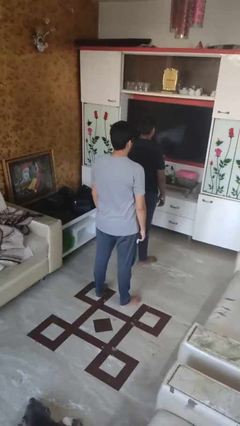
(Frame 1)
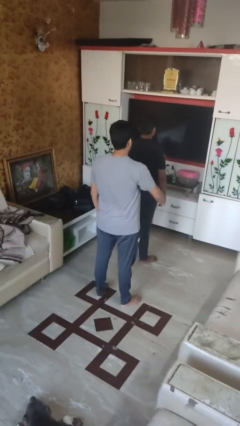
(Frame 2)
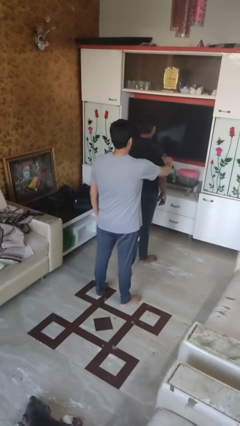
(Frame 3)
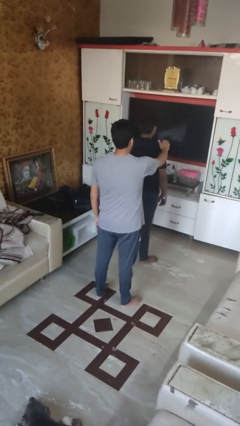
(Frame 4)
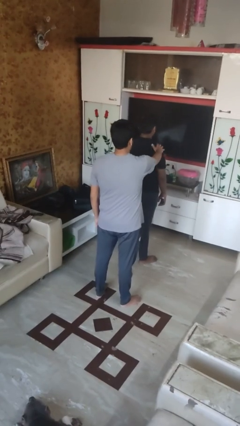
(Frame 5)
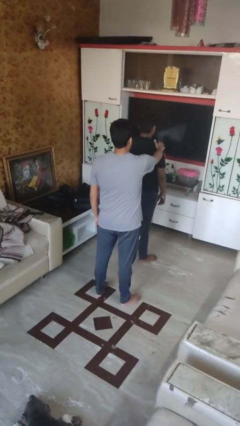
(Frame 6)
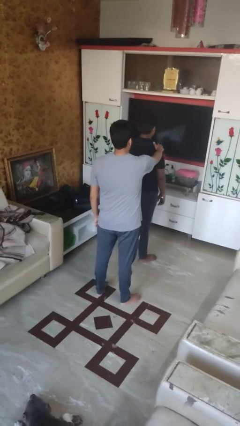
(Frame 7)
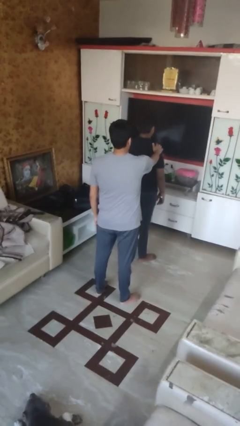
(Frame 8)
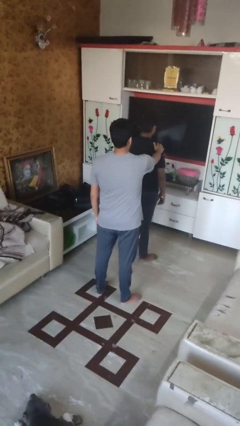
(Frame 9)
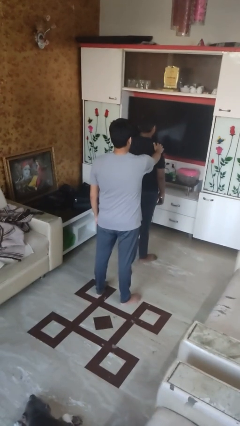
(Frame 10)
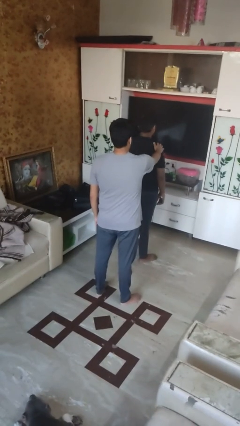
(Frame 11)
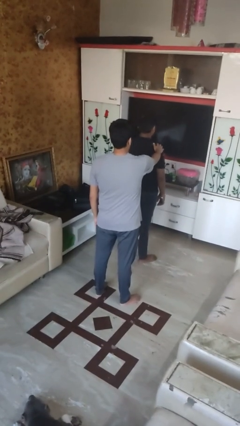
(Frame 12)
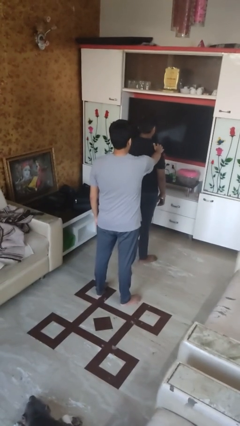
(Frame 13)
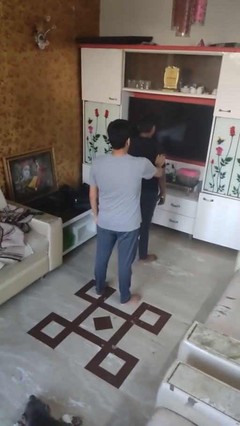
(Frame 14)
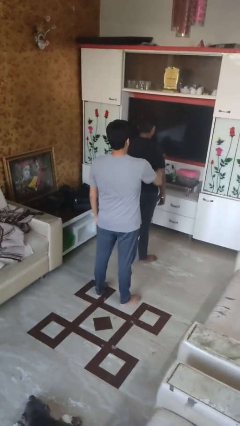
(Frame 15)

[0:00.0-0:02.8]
person pounds shoulders of person

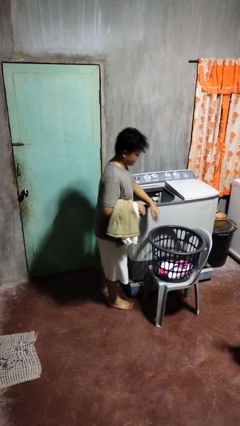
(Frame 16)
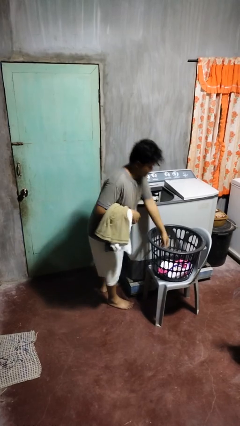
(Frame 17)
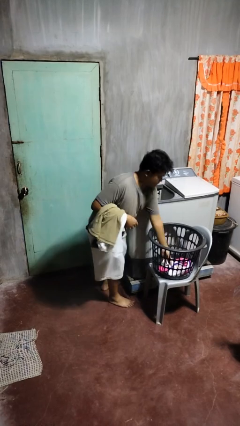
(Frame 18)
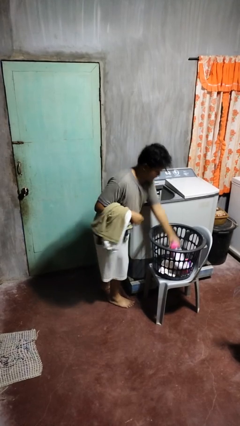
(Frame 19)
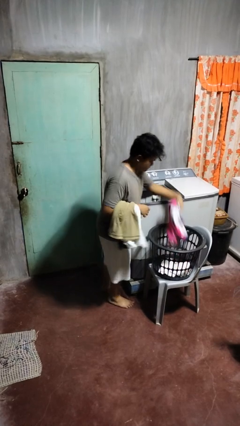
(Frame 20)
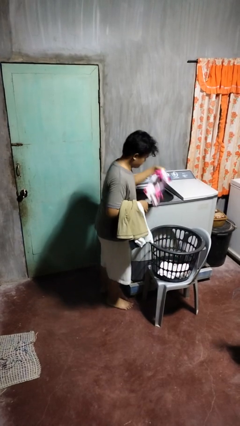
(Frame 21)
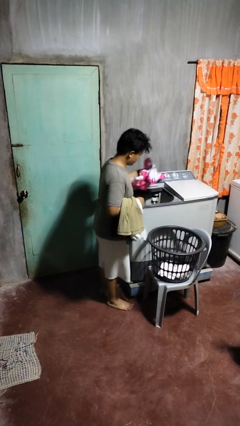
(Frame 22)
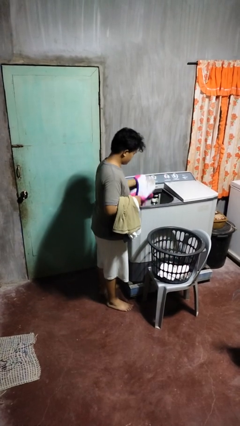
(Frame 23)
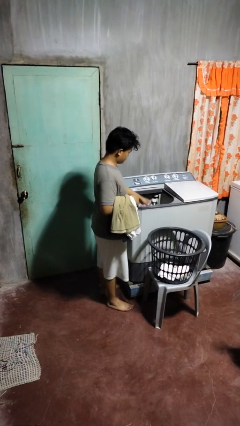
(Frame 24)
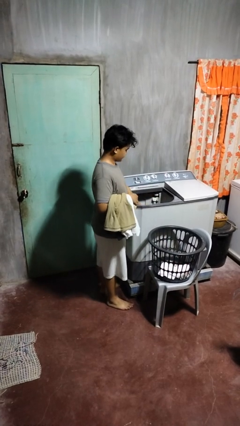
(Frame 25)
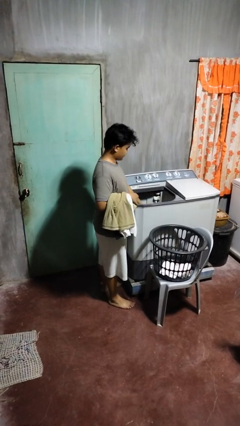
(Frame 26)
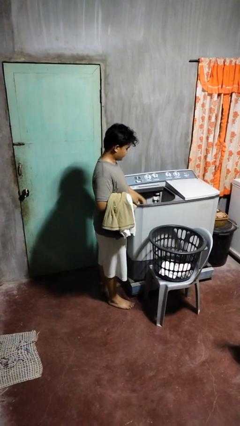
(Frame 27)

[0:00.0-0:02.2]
person loads clotheswasher

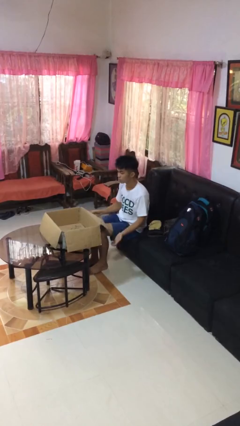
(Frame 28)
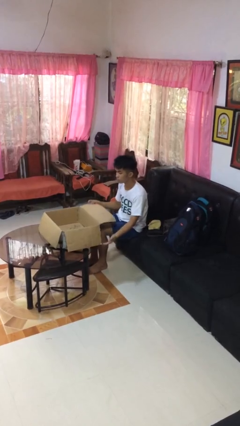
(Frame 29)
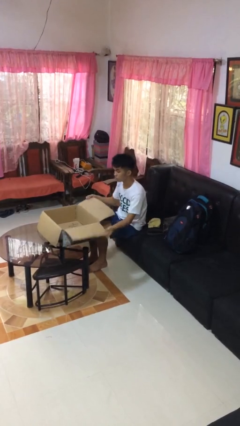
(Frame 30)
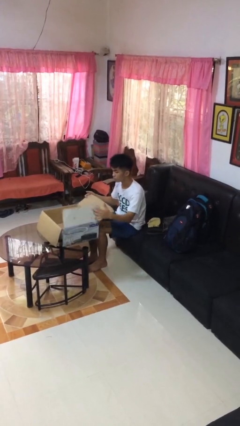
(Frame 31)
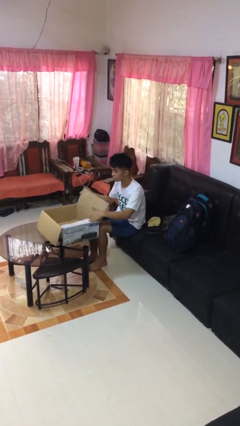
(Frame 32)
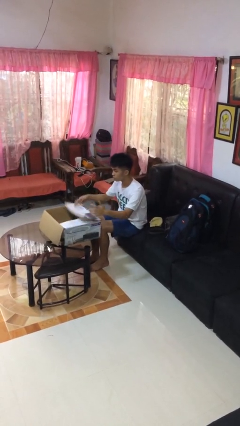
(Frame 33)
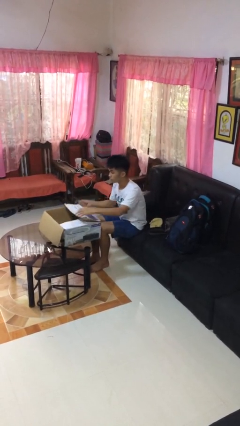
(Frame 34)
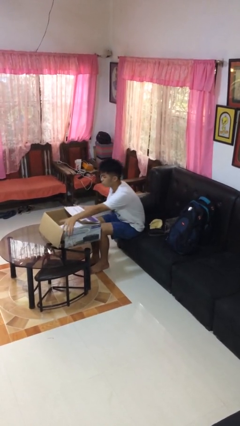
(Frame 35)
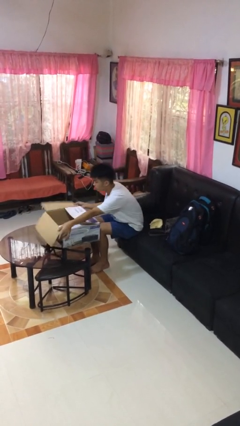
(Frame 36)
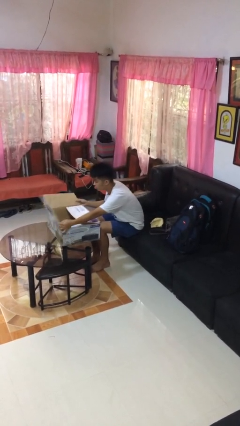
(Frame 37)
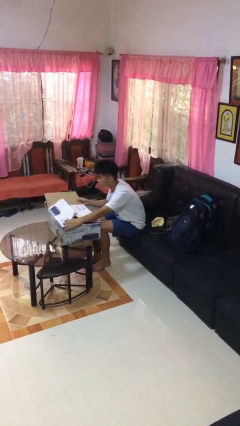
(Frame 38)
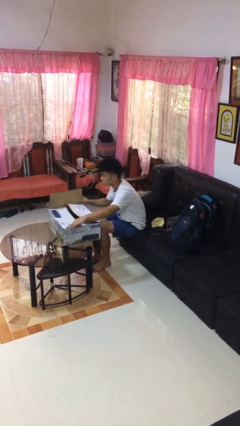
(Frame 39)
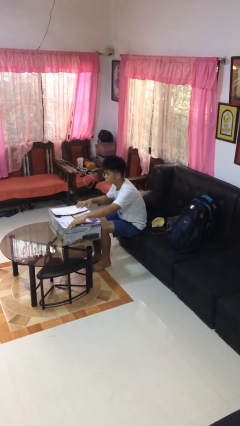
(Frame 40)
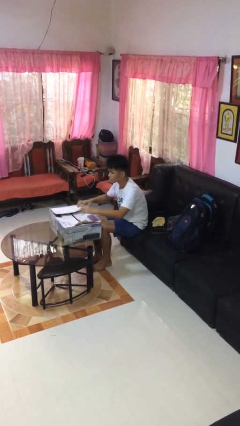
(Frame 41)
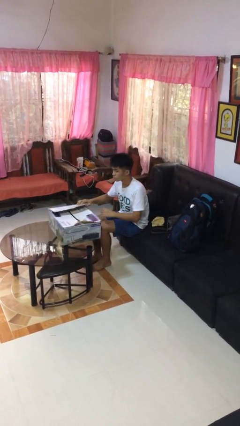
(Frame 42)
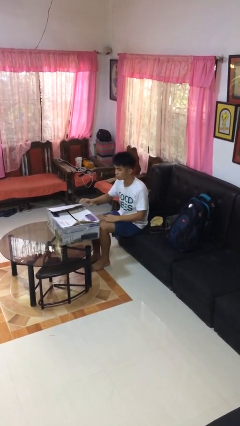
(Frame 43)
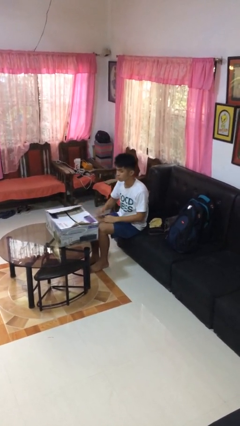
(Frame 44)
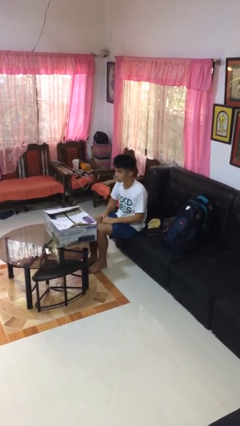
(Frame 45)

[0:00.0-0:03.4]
person closes box

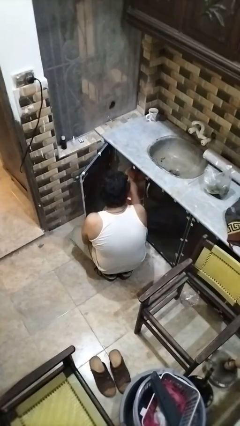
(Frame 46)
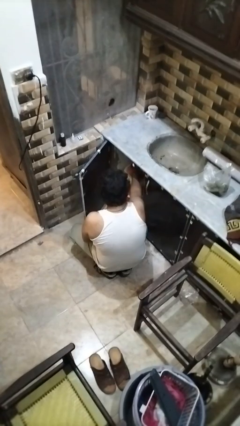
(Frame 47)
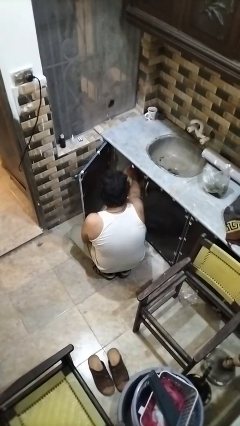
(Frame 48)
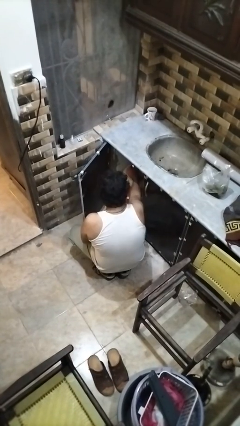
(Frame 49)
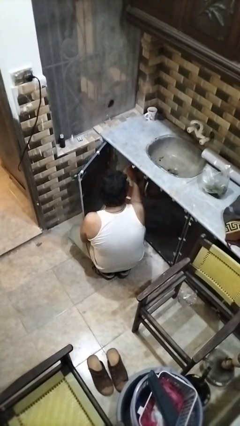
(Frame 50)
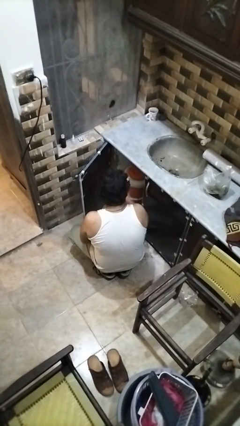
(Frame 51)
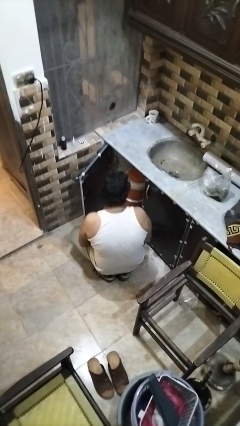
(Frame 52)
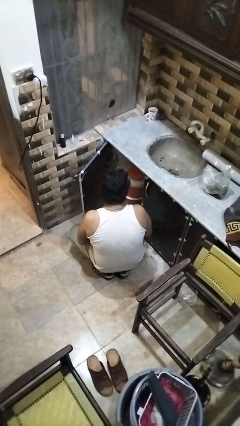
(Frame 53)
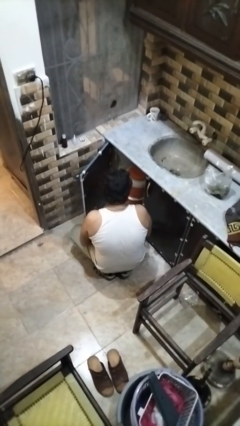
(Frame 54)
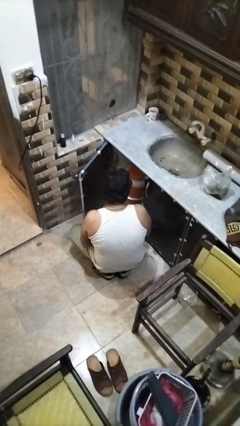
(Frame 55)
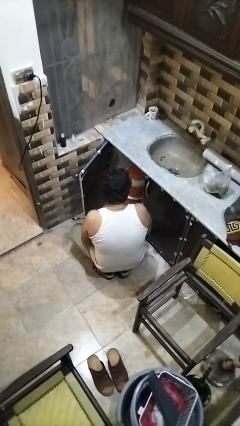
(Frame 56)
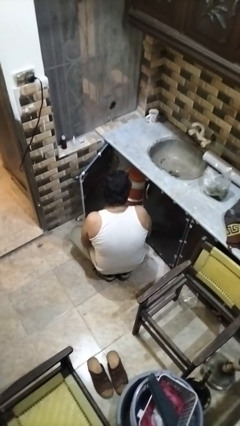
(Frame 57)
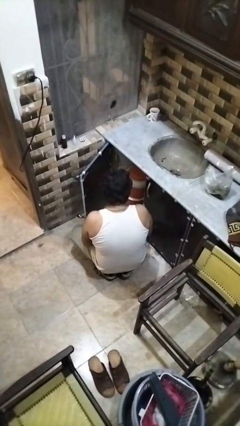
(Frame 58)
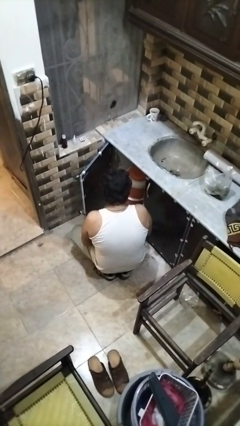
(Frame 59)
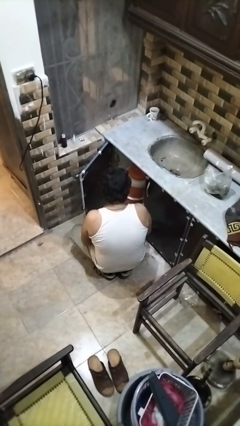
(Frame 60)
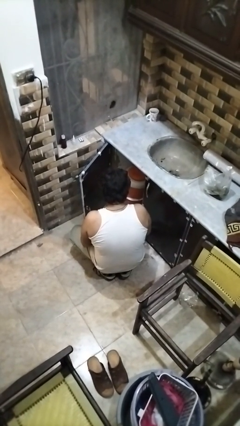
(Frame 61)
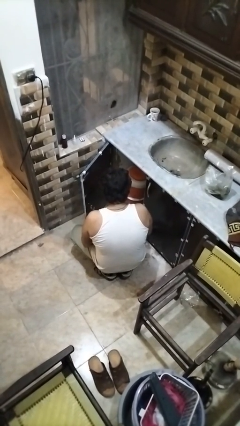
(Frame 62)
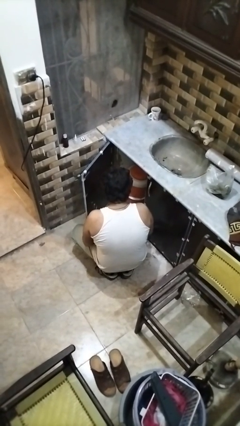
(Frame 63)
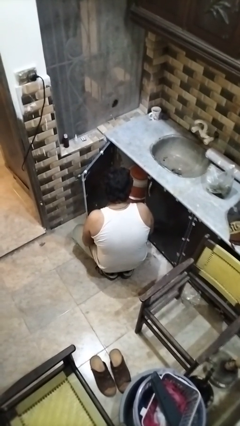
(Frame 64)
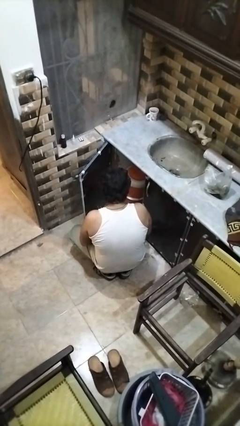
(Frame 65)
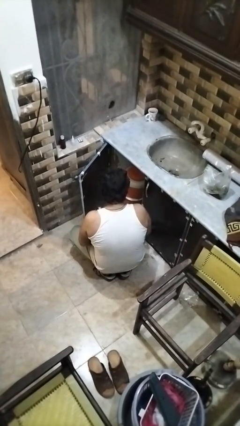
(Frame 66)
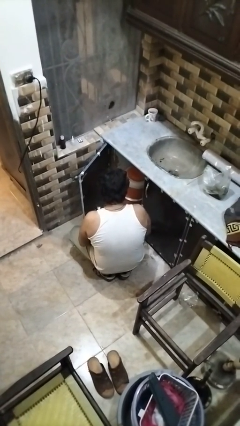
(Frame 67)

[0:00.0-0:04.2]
person takes object from kitchen drawer

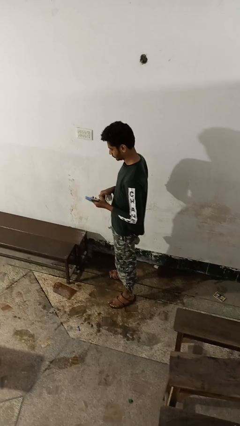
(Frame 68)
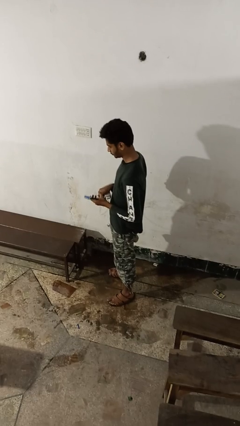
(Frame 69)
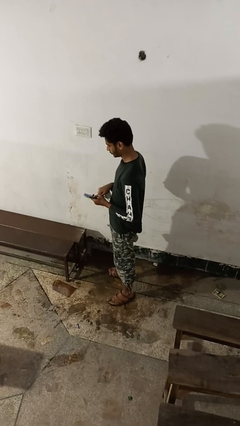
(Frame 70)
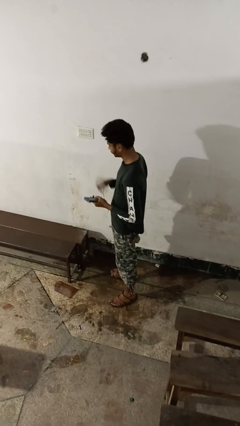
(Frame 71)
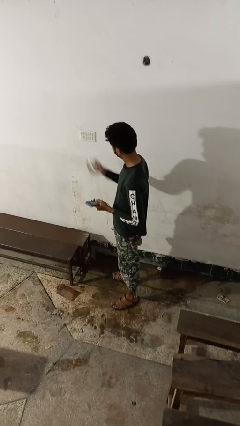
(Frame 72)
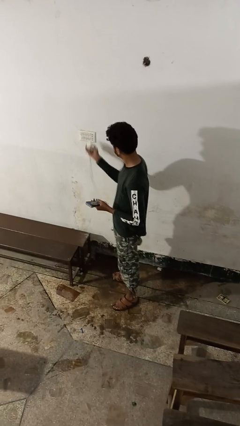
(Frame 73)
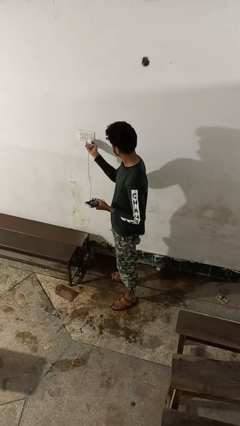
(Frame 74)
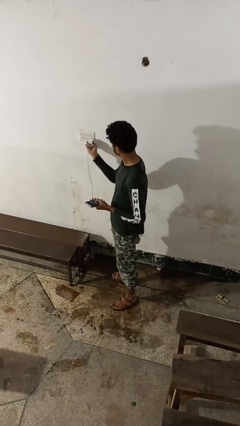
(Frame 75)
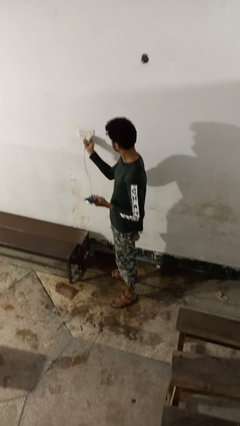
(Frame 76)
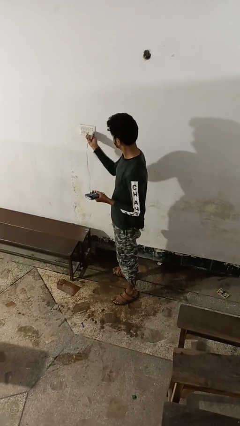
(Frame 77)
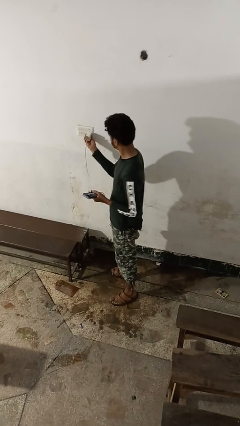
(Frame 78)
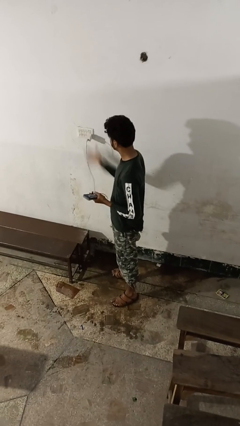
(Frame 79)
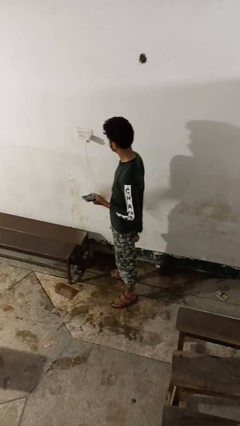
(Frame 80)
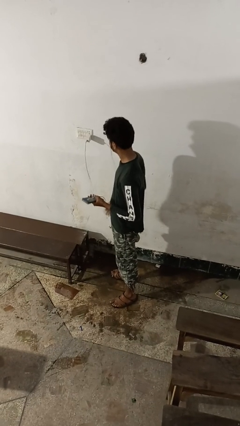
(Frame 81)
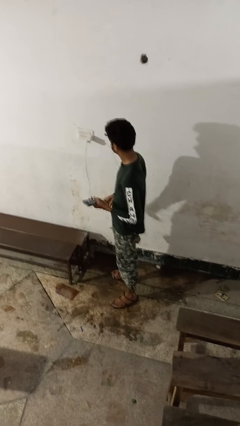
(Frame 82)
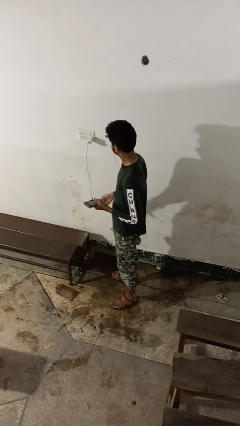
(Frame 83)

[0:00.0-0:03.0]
person plugs into electrical socket

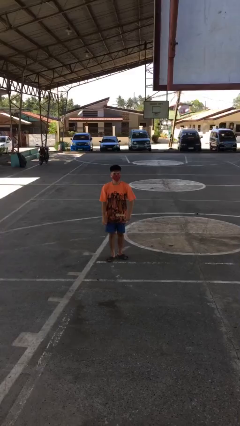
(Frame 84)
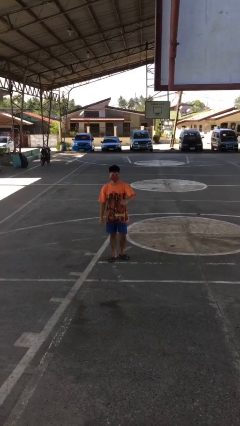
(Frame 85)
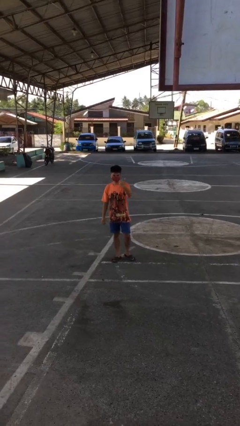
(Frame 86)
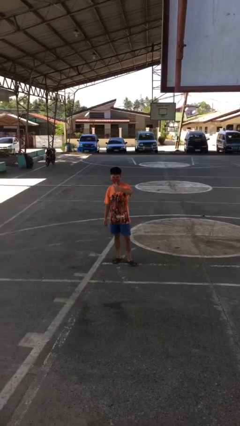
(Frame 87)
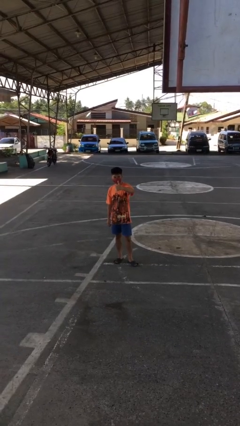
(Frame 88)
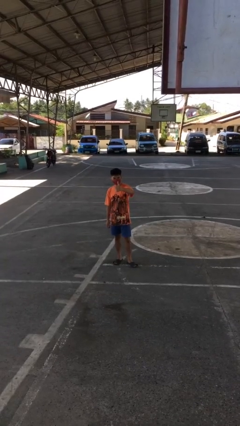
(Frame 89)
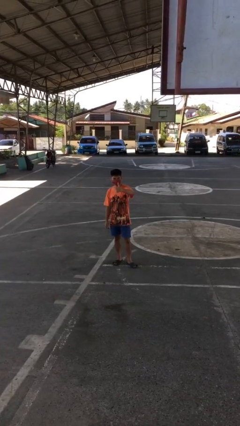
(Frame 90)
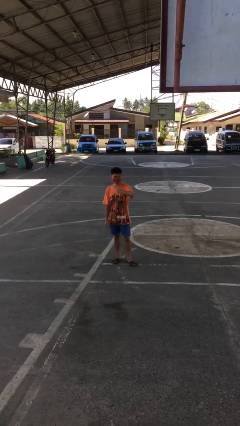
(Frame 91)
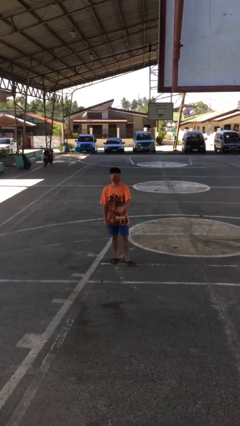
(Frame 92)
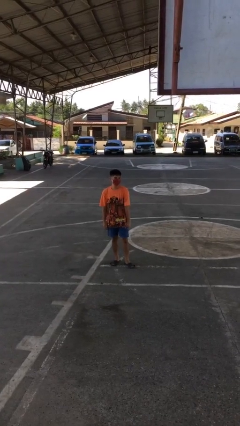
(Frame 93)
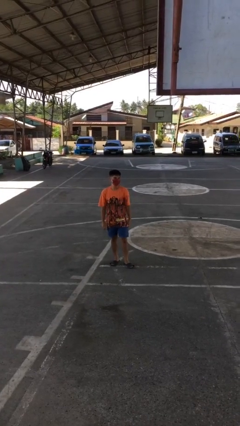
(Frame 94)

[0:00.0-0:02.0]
person gestures thumbs up
